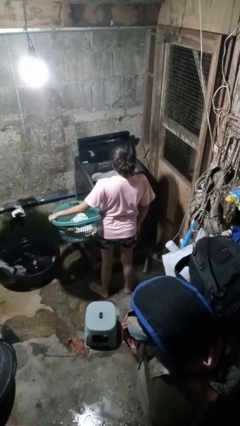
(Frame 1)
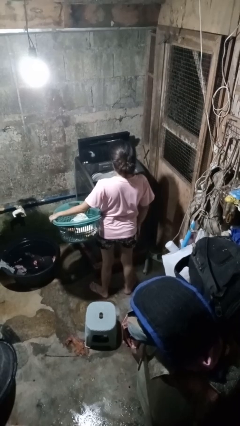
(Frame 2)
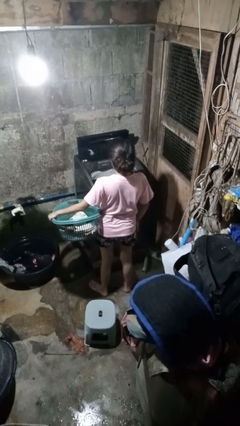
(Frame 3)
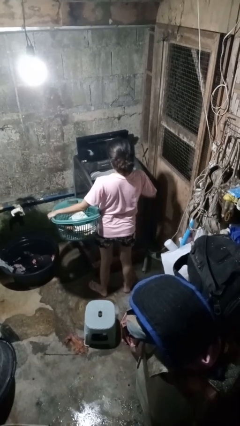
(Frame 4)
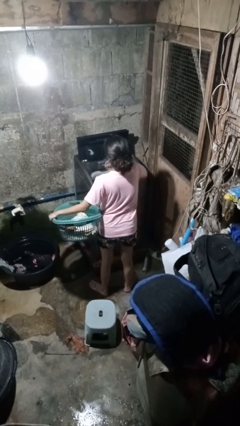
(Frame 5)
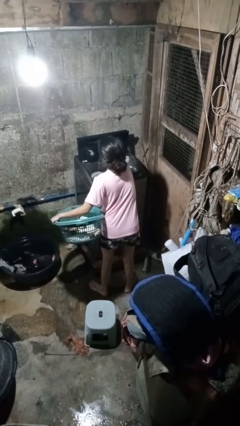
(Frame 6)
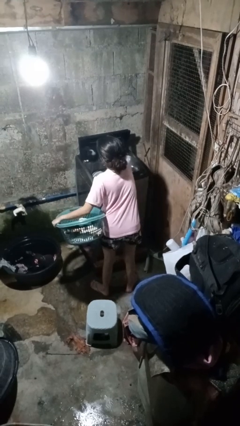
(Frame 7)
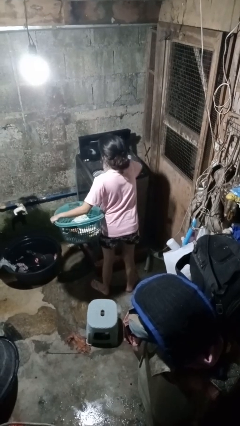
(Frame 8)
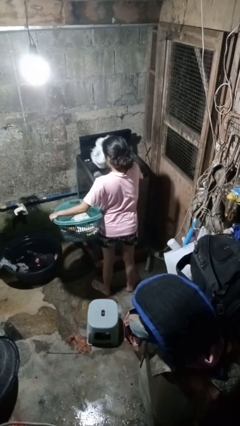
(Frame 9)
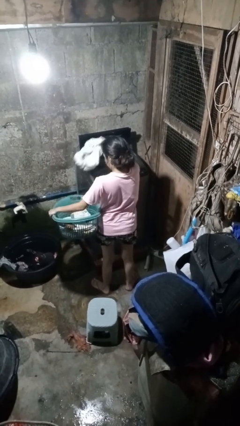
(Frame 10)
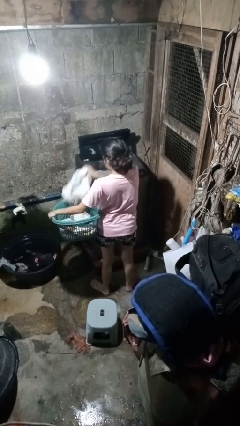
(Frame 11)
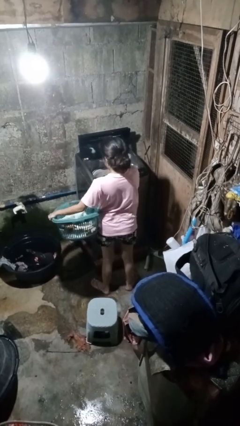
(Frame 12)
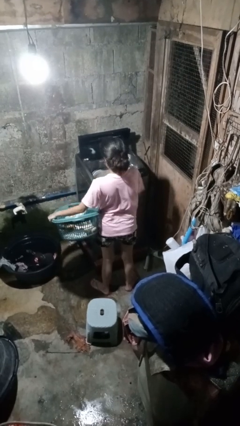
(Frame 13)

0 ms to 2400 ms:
person unloads dryer

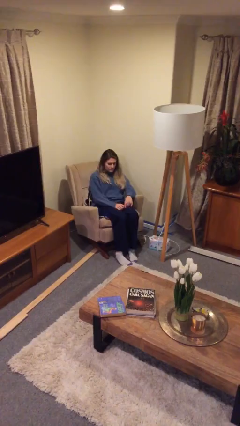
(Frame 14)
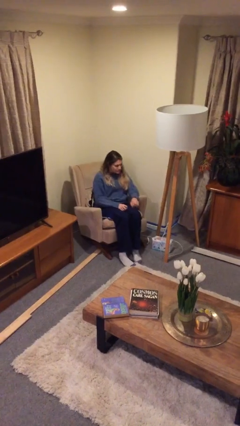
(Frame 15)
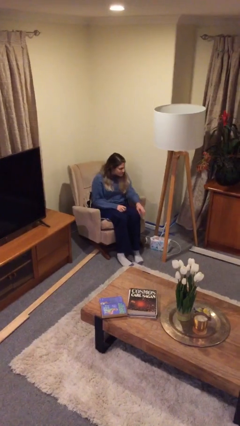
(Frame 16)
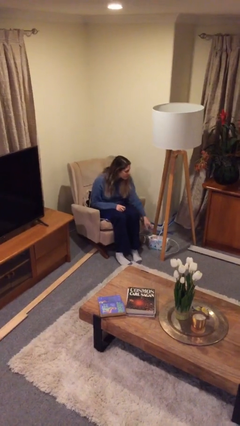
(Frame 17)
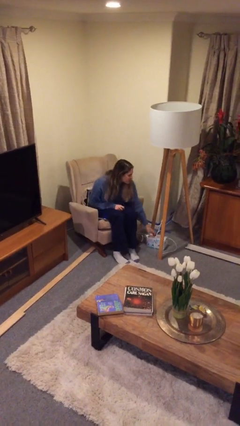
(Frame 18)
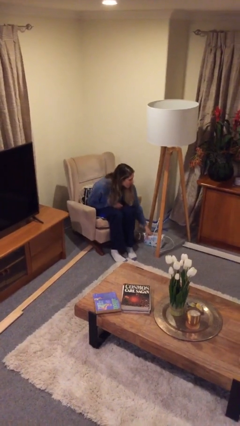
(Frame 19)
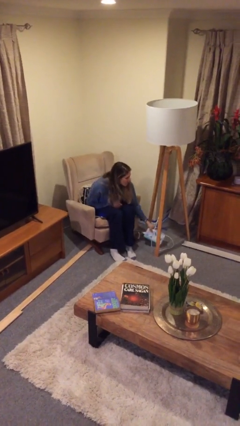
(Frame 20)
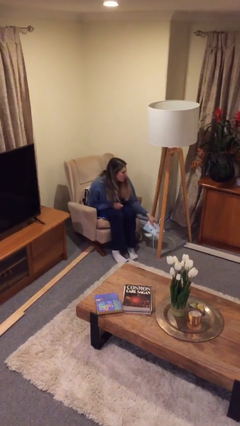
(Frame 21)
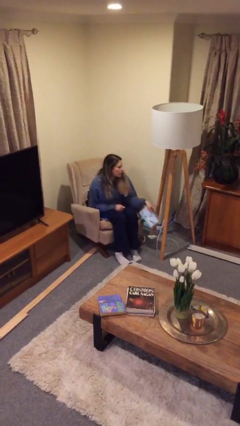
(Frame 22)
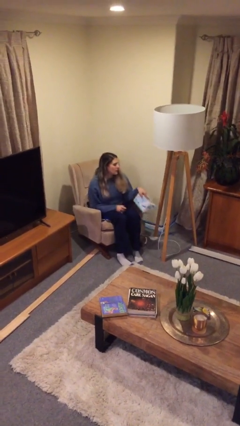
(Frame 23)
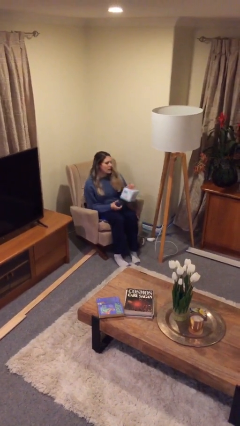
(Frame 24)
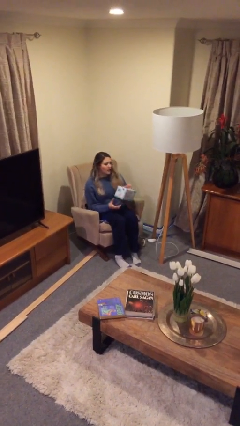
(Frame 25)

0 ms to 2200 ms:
person picks up object from floor

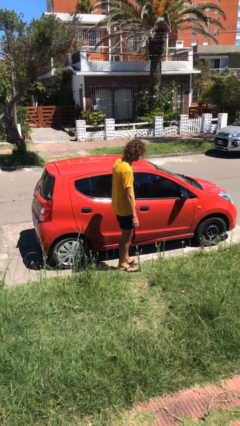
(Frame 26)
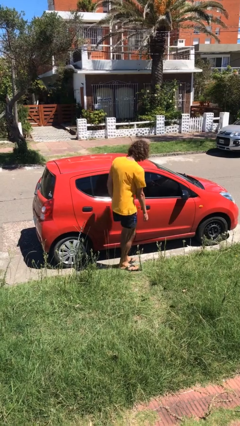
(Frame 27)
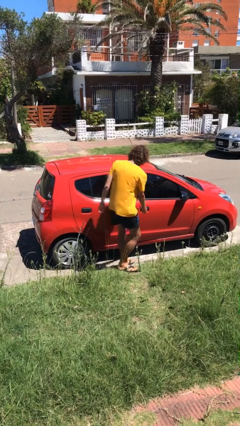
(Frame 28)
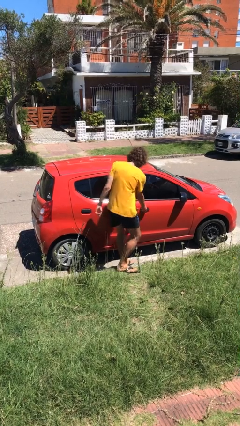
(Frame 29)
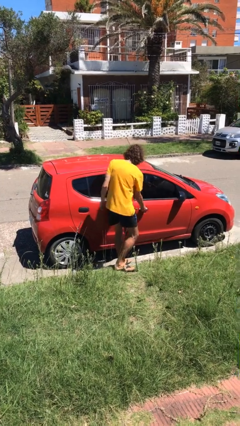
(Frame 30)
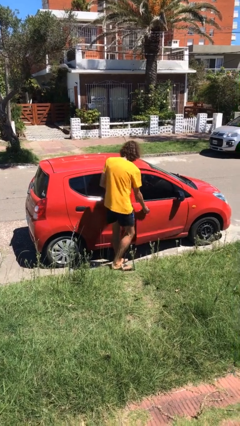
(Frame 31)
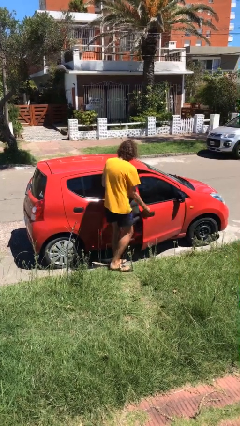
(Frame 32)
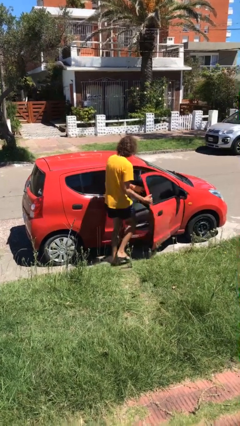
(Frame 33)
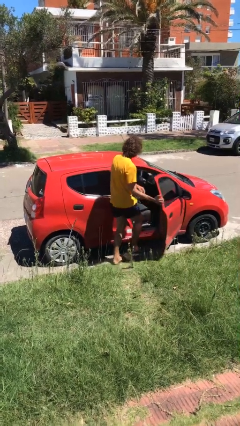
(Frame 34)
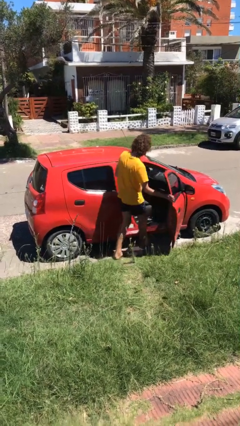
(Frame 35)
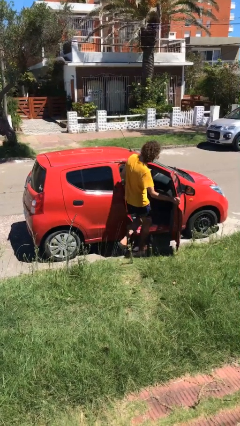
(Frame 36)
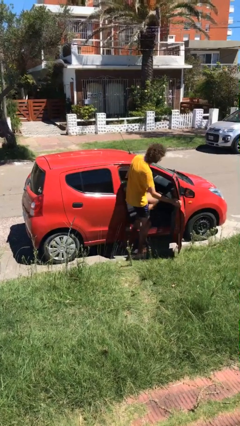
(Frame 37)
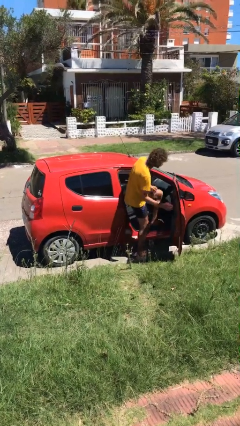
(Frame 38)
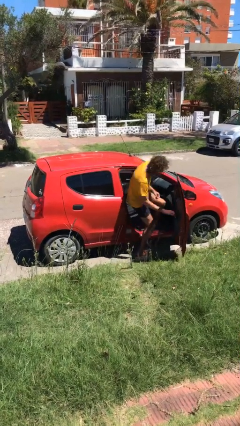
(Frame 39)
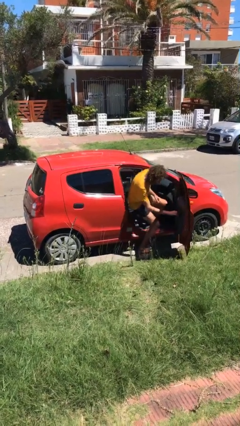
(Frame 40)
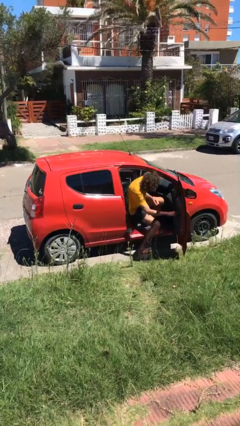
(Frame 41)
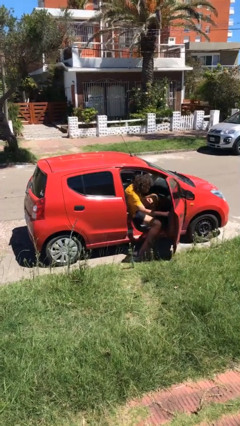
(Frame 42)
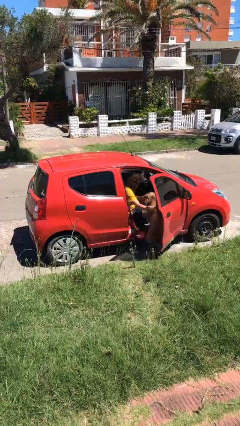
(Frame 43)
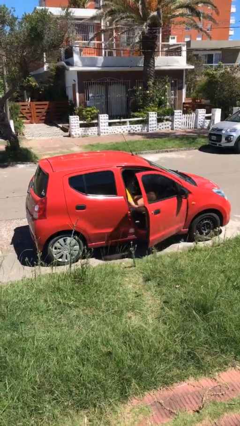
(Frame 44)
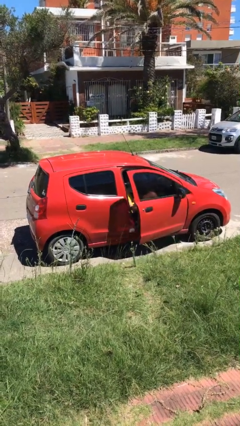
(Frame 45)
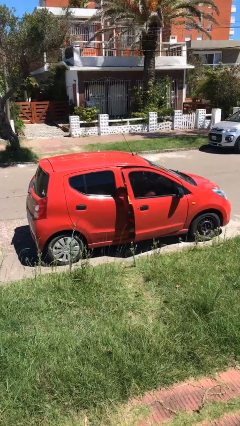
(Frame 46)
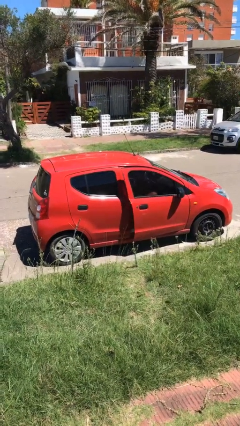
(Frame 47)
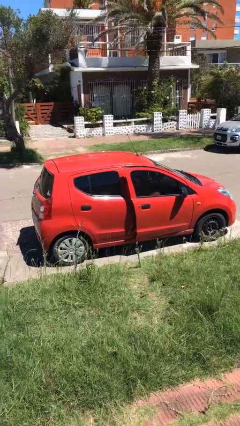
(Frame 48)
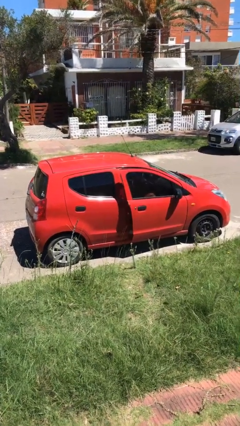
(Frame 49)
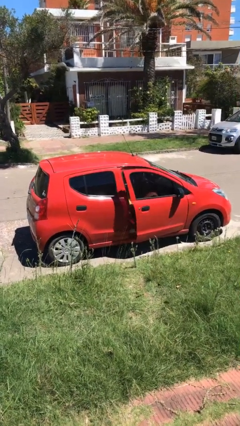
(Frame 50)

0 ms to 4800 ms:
car picks up person

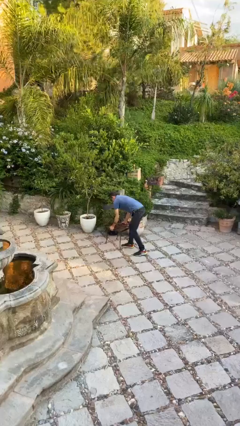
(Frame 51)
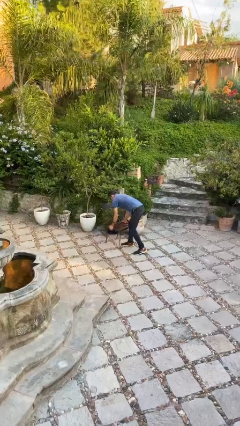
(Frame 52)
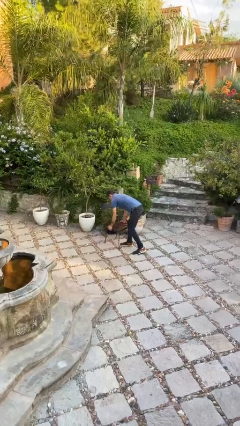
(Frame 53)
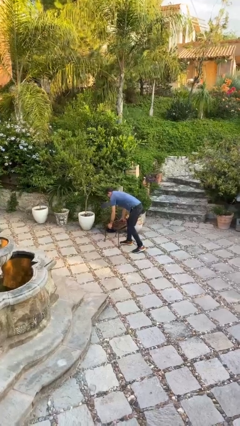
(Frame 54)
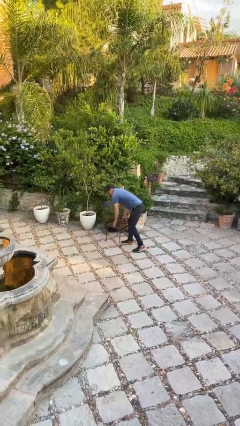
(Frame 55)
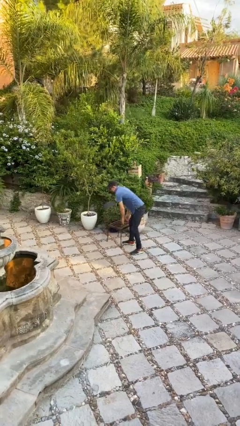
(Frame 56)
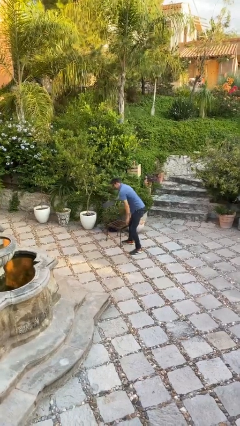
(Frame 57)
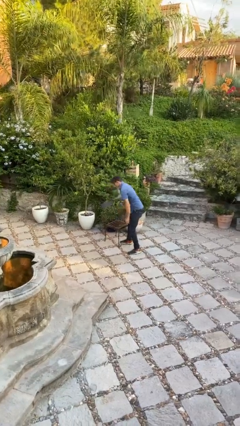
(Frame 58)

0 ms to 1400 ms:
person puts down object on floor

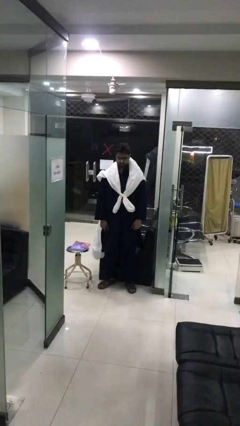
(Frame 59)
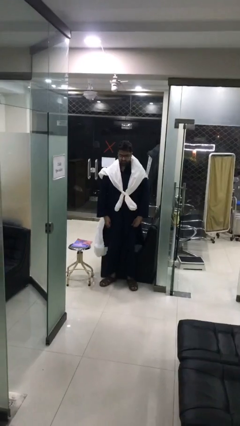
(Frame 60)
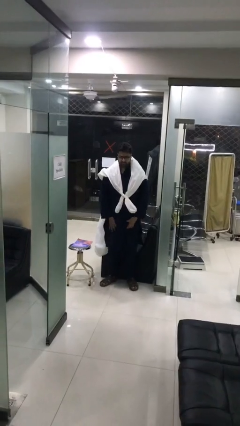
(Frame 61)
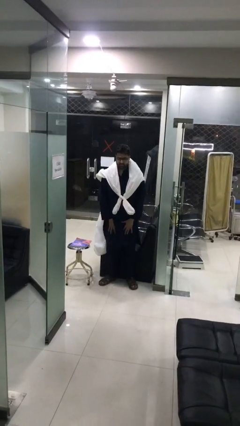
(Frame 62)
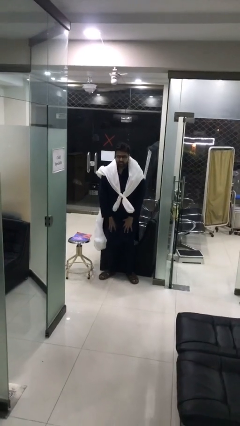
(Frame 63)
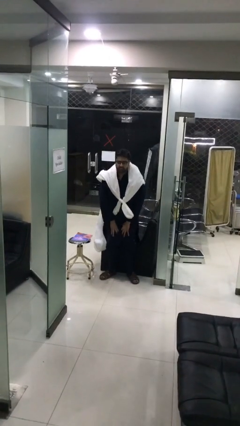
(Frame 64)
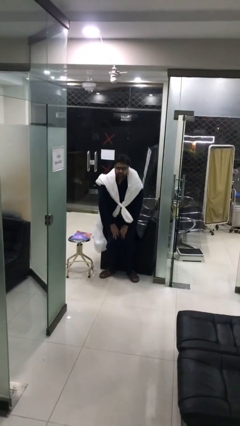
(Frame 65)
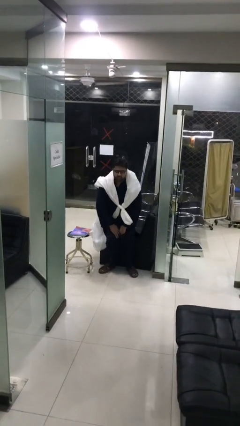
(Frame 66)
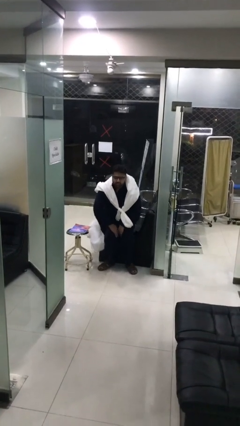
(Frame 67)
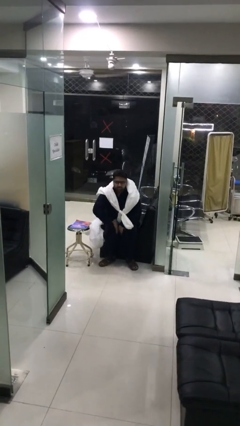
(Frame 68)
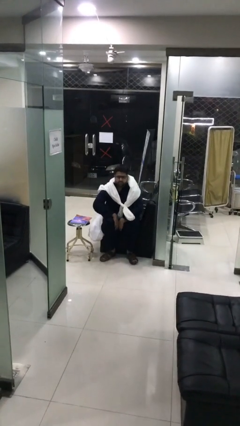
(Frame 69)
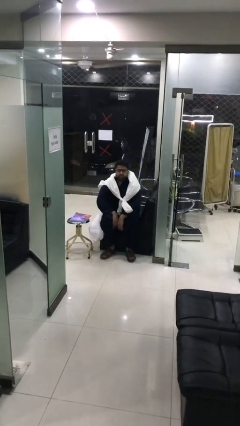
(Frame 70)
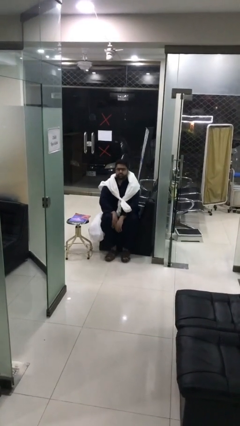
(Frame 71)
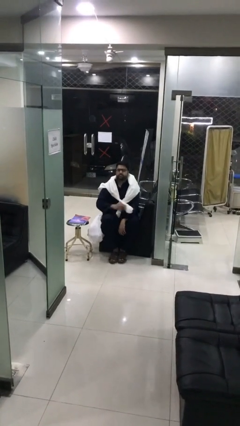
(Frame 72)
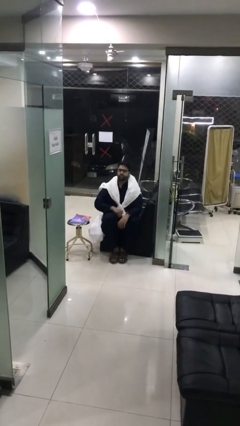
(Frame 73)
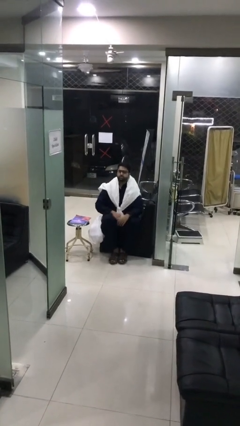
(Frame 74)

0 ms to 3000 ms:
person sits down

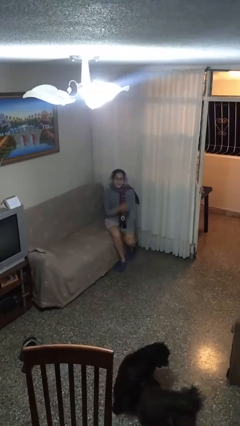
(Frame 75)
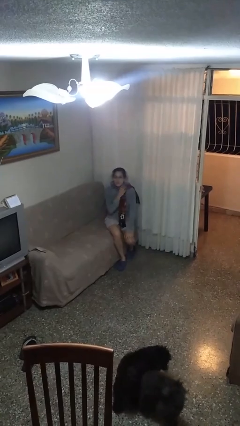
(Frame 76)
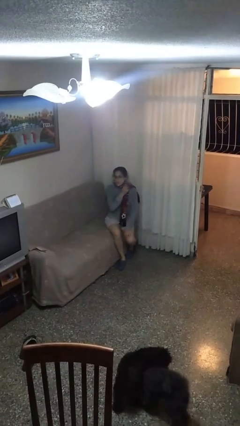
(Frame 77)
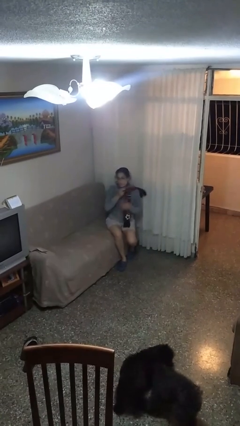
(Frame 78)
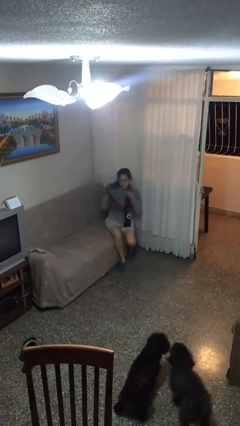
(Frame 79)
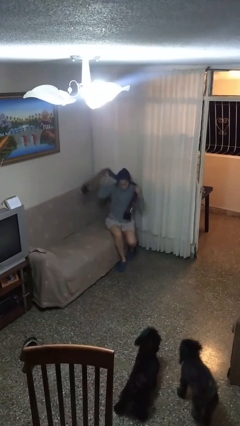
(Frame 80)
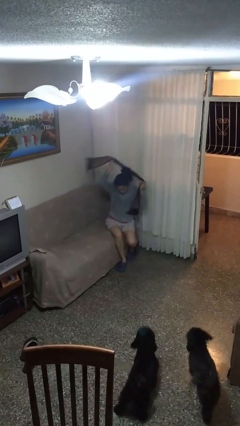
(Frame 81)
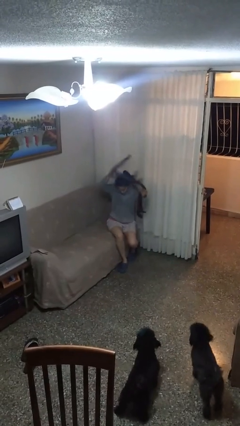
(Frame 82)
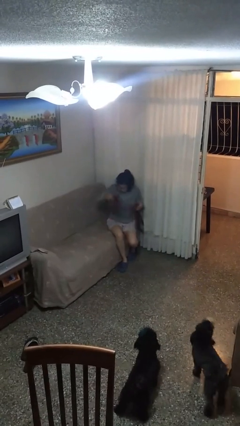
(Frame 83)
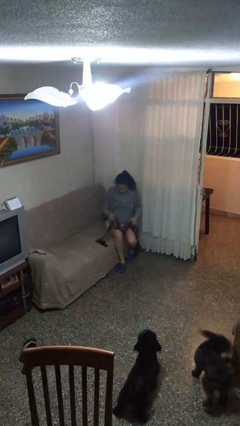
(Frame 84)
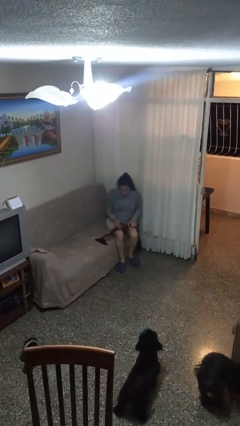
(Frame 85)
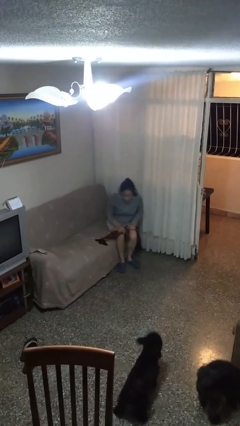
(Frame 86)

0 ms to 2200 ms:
person takes off scarf

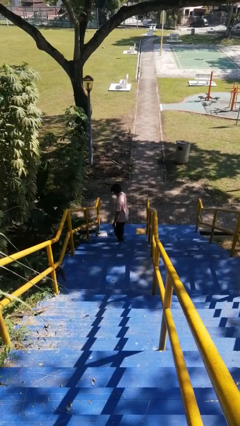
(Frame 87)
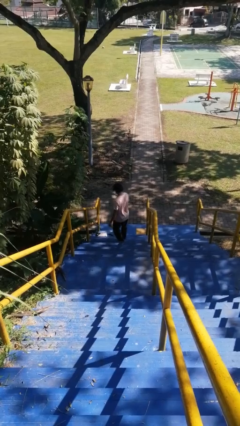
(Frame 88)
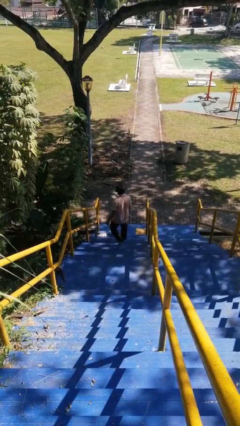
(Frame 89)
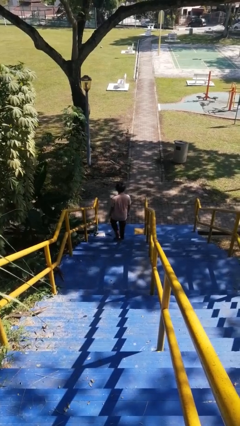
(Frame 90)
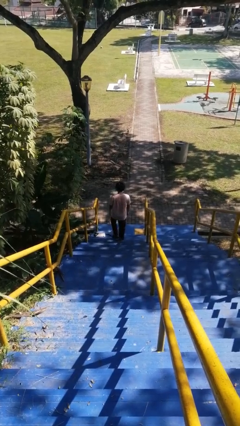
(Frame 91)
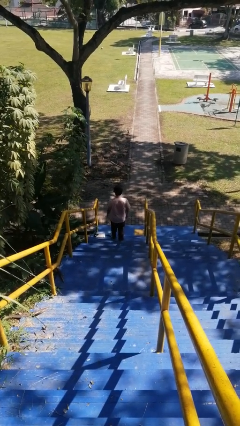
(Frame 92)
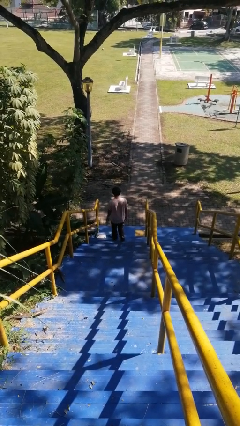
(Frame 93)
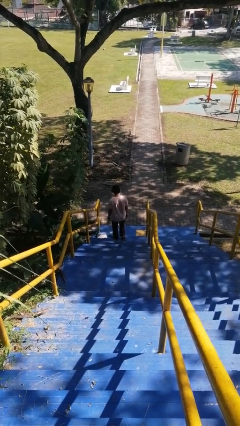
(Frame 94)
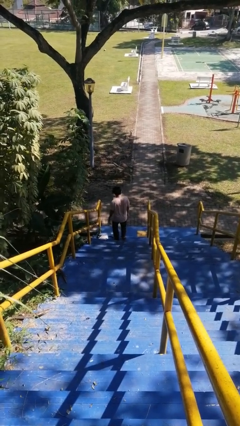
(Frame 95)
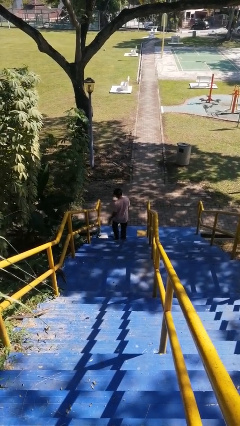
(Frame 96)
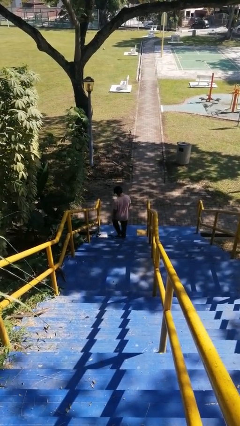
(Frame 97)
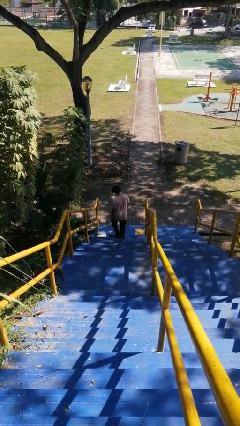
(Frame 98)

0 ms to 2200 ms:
person climbs down stairs
